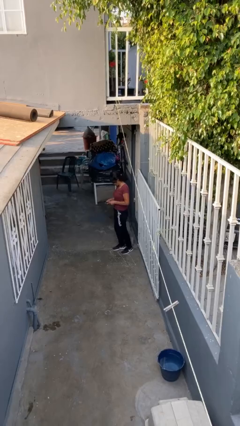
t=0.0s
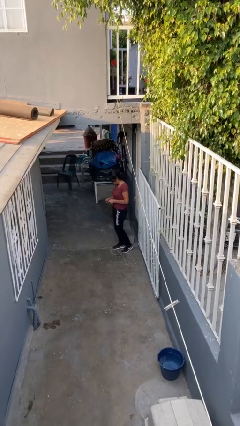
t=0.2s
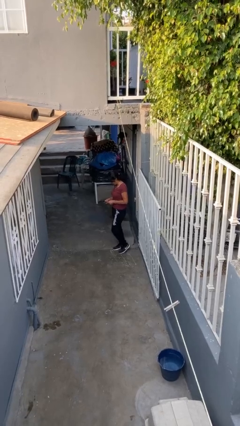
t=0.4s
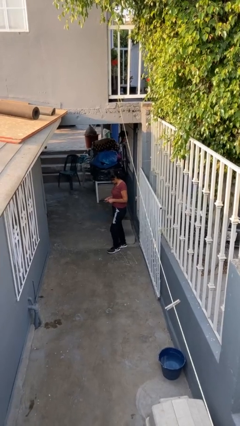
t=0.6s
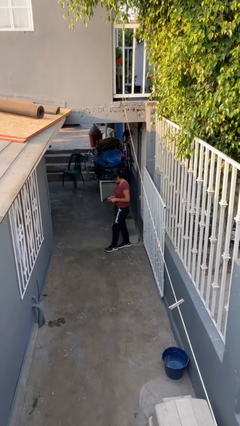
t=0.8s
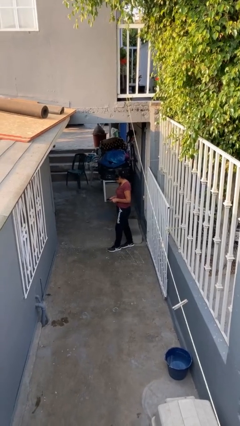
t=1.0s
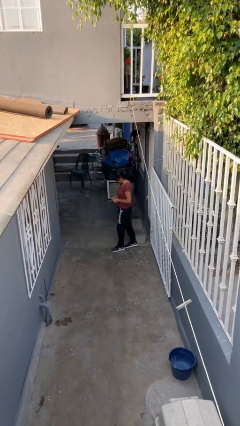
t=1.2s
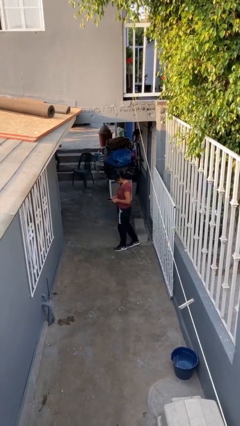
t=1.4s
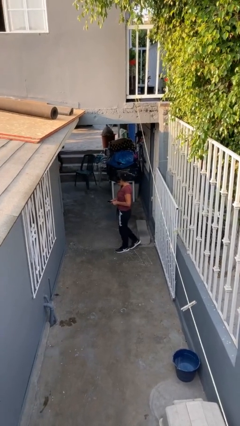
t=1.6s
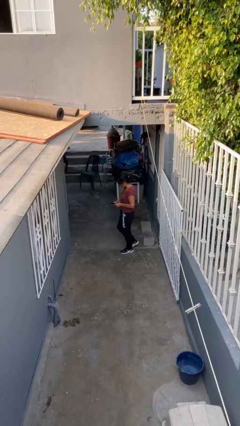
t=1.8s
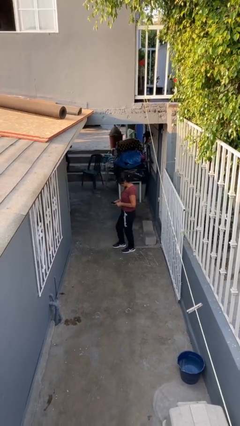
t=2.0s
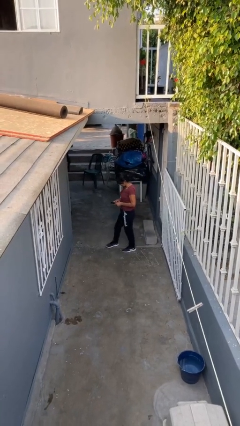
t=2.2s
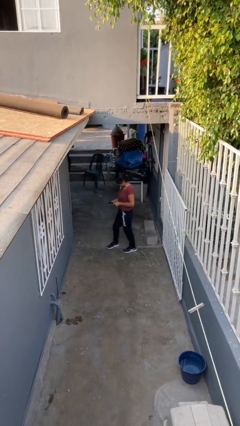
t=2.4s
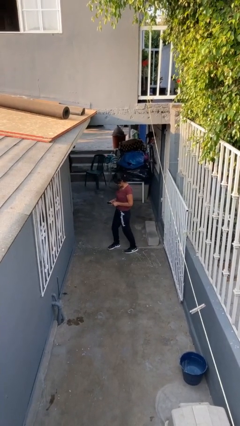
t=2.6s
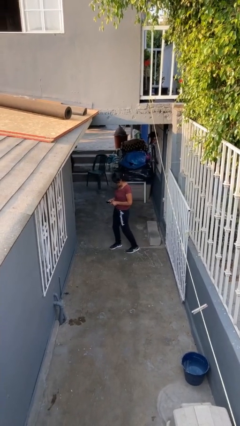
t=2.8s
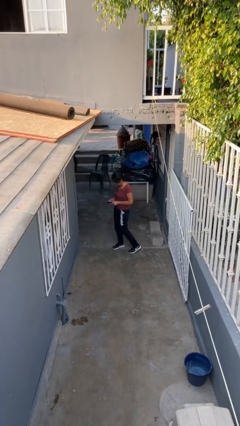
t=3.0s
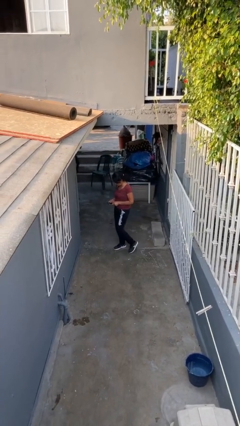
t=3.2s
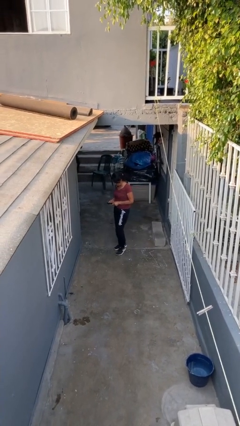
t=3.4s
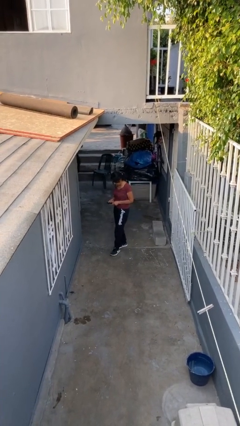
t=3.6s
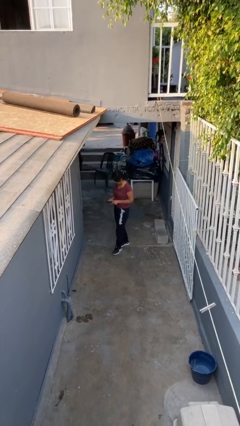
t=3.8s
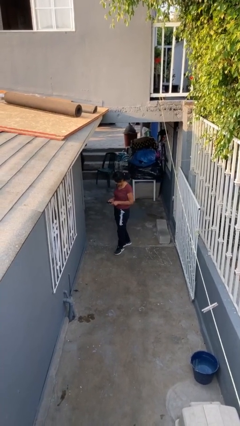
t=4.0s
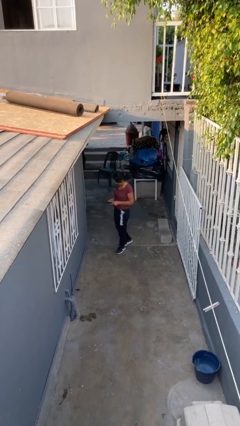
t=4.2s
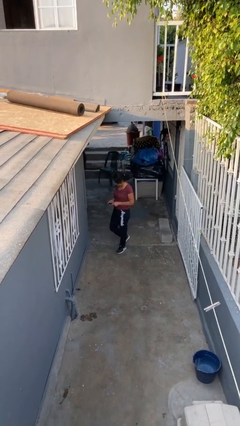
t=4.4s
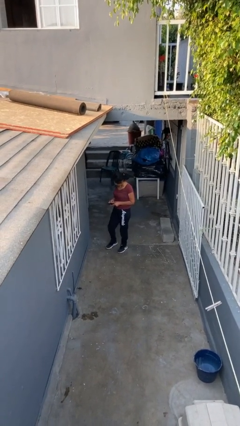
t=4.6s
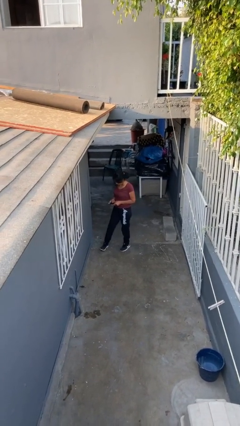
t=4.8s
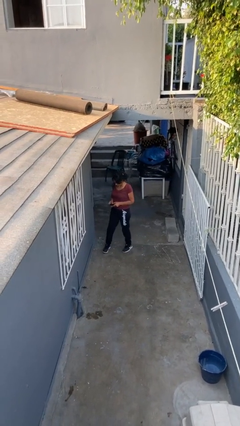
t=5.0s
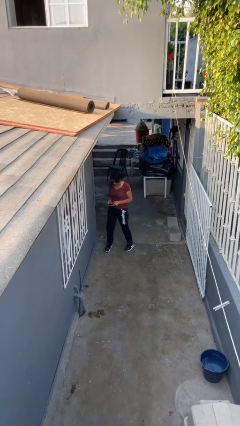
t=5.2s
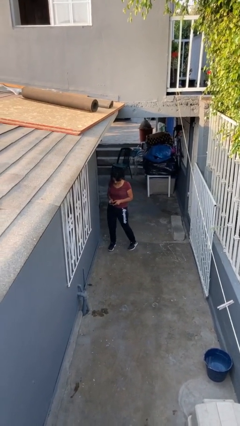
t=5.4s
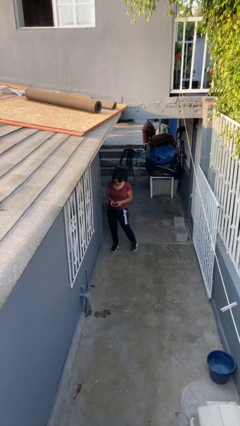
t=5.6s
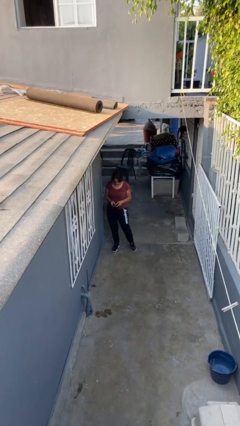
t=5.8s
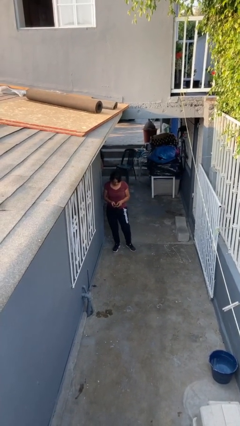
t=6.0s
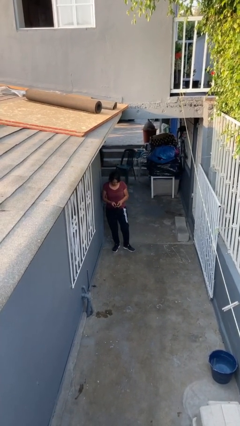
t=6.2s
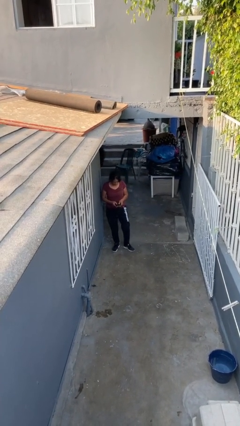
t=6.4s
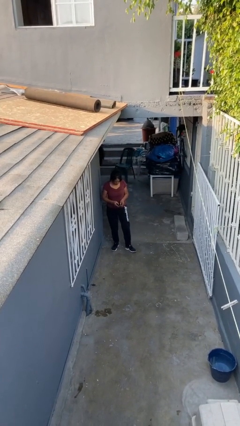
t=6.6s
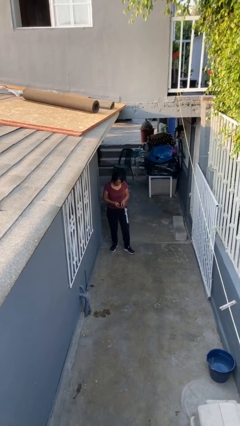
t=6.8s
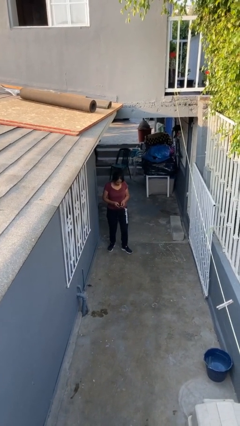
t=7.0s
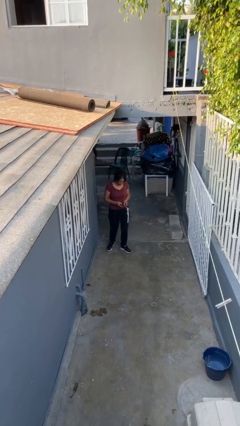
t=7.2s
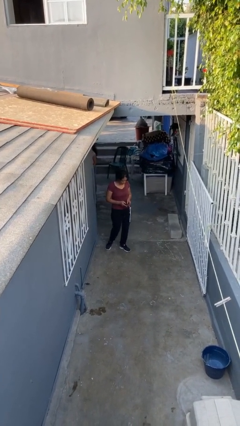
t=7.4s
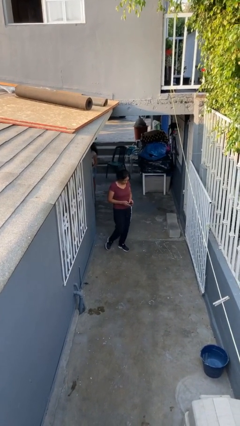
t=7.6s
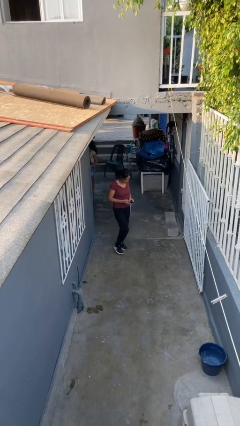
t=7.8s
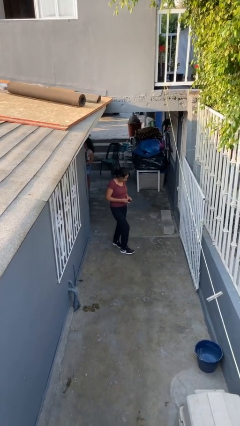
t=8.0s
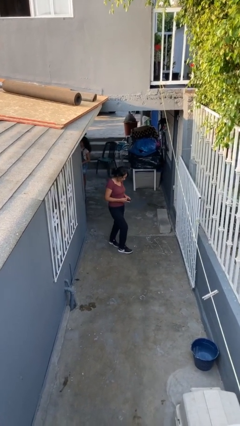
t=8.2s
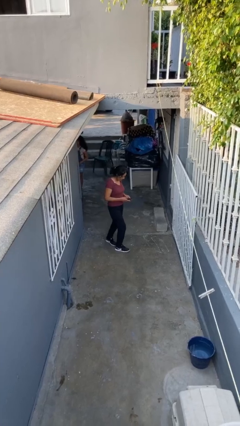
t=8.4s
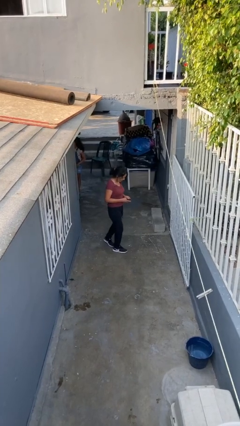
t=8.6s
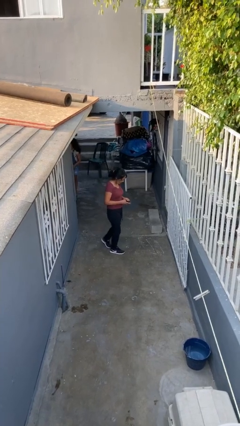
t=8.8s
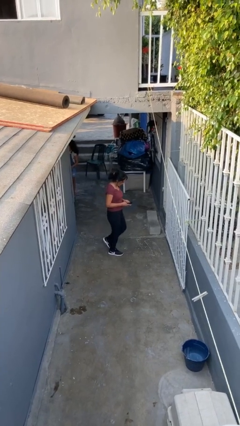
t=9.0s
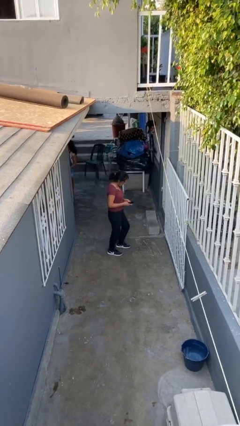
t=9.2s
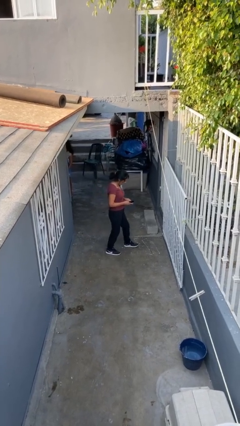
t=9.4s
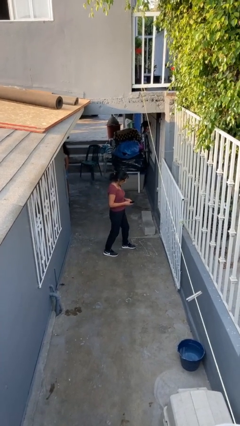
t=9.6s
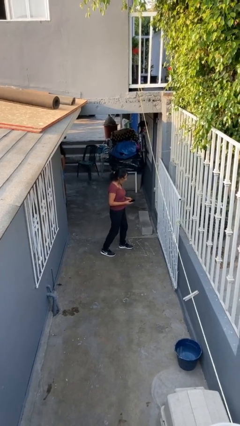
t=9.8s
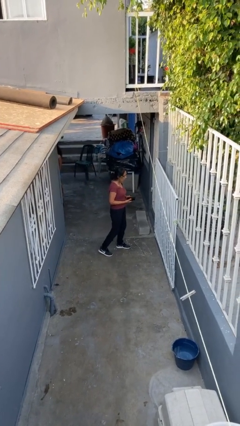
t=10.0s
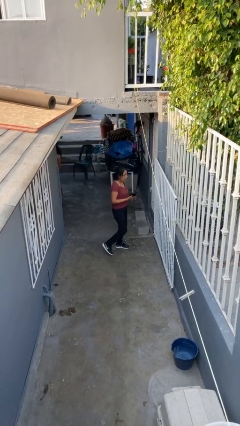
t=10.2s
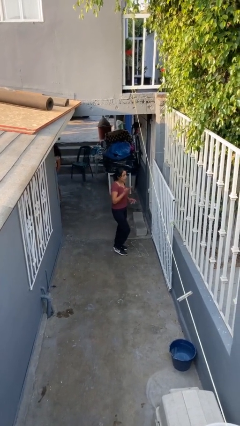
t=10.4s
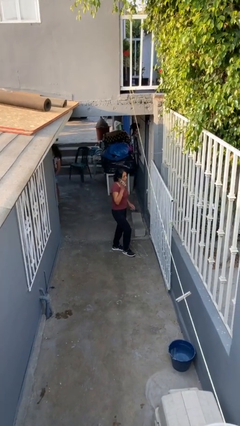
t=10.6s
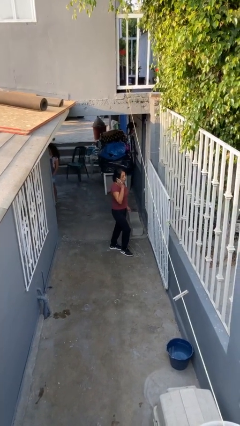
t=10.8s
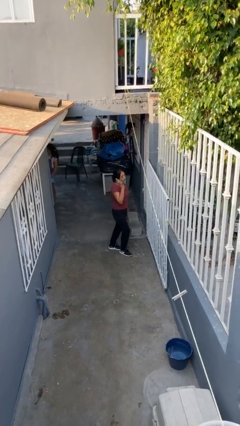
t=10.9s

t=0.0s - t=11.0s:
person texts on phone

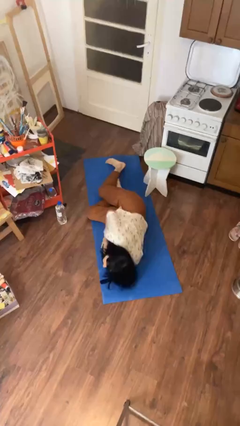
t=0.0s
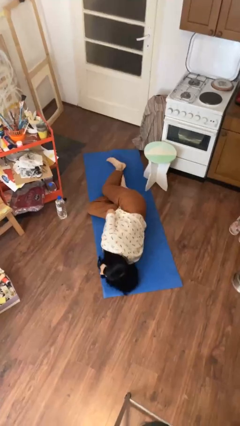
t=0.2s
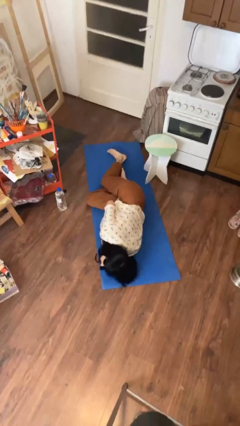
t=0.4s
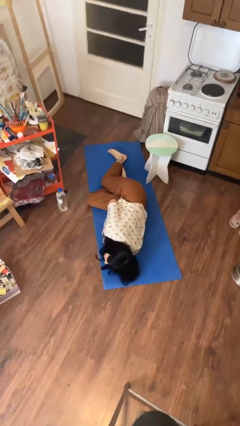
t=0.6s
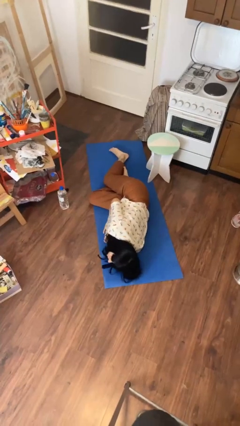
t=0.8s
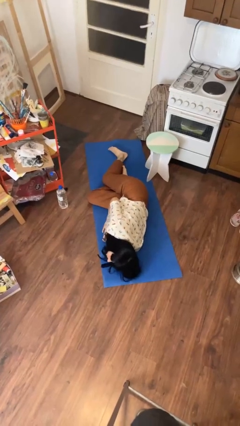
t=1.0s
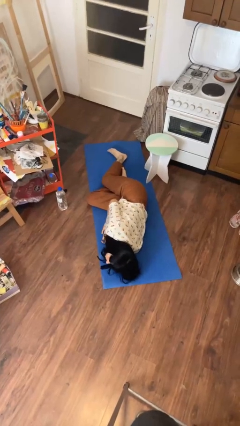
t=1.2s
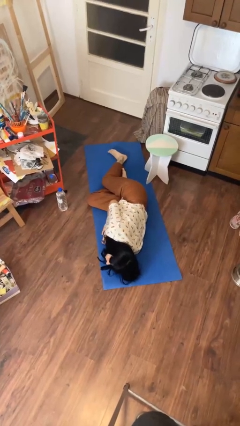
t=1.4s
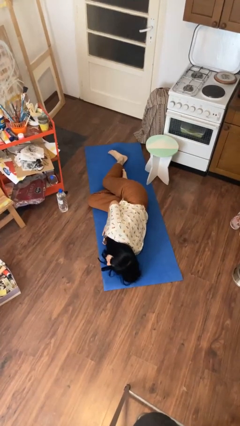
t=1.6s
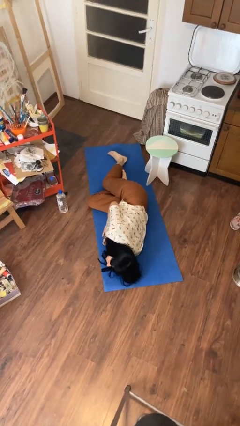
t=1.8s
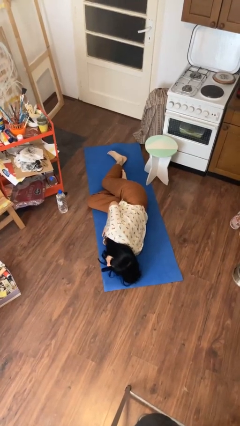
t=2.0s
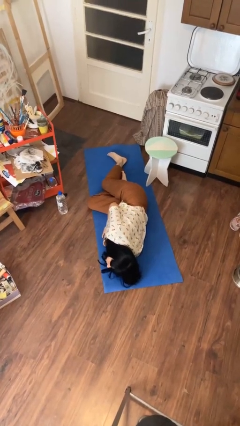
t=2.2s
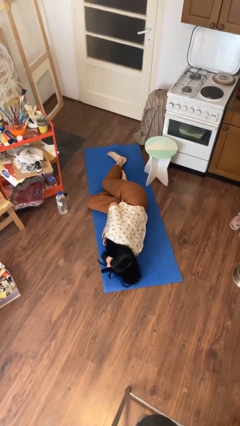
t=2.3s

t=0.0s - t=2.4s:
person lies down on floor

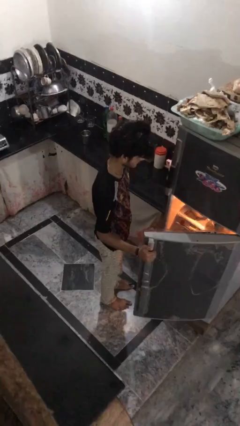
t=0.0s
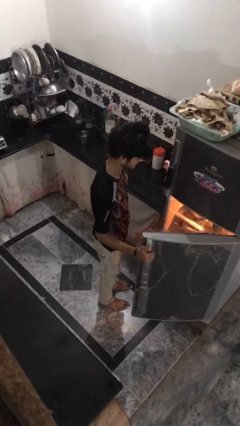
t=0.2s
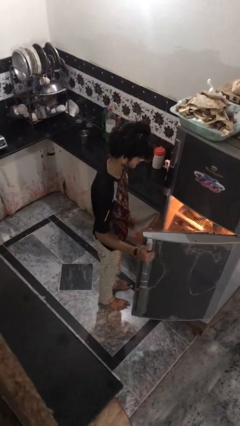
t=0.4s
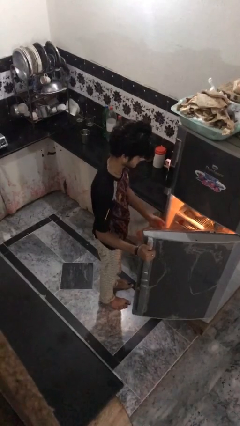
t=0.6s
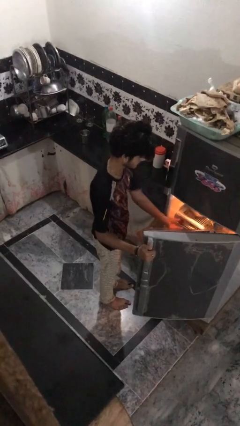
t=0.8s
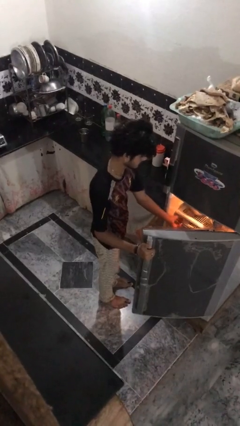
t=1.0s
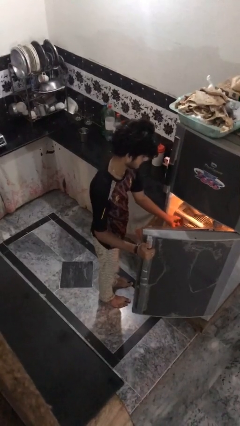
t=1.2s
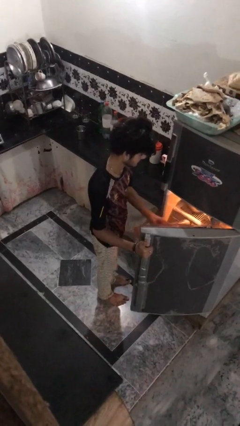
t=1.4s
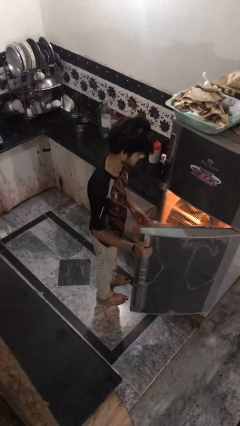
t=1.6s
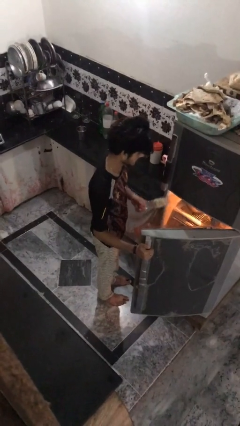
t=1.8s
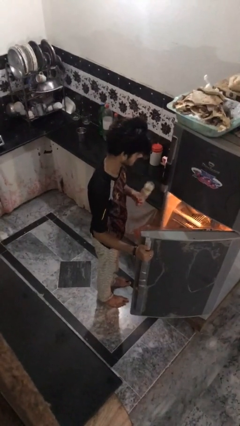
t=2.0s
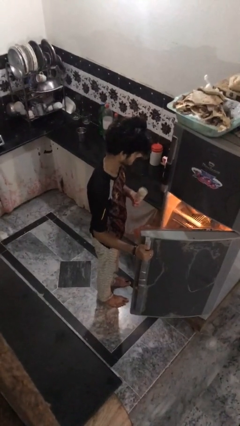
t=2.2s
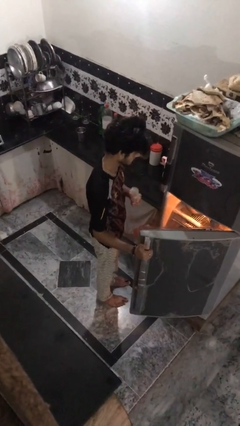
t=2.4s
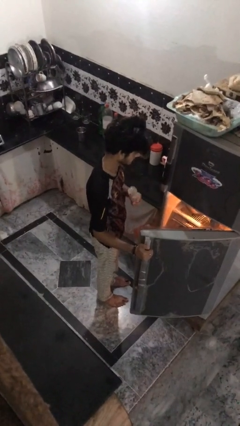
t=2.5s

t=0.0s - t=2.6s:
person takes object from refrigerator

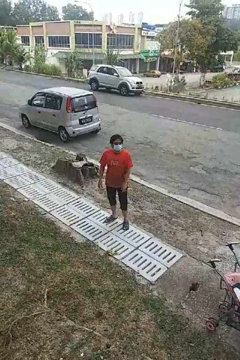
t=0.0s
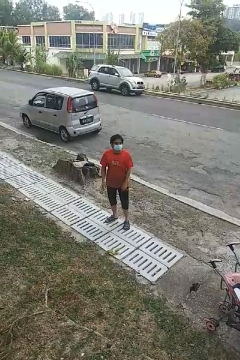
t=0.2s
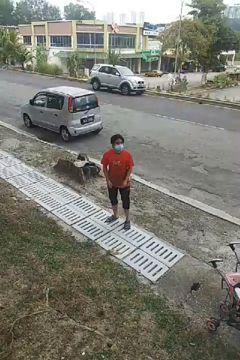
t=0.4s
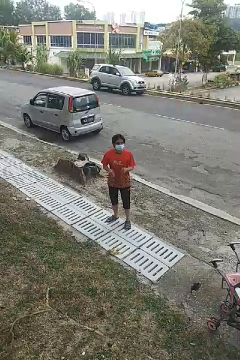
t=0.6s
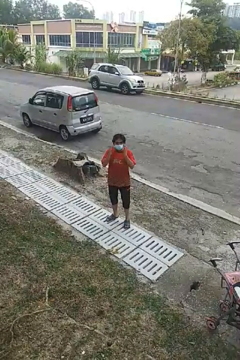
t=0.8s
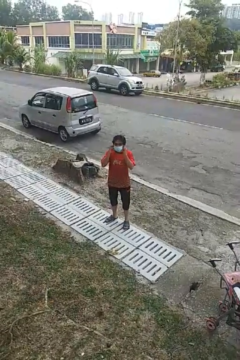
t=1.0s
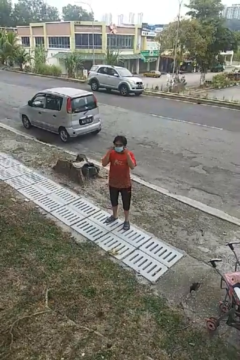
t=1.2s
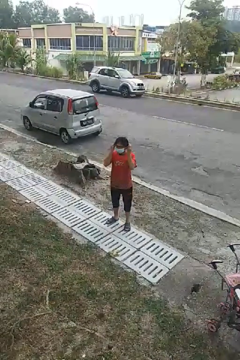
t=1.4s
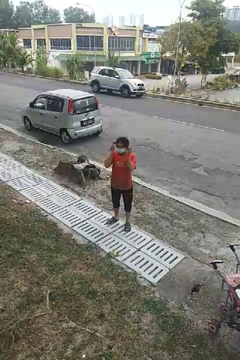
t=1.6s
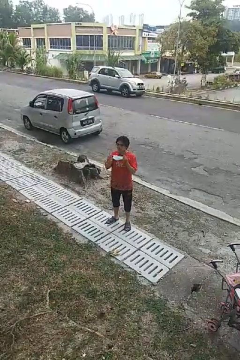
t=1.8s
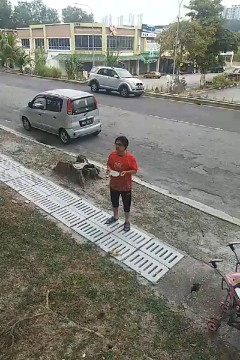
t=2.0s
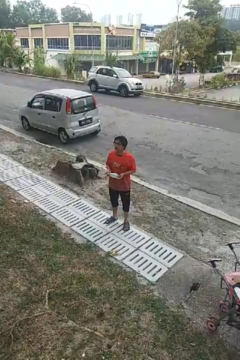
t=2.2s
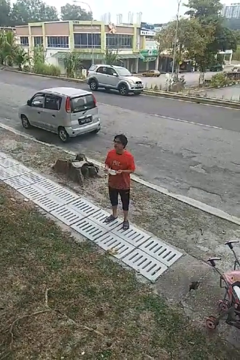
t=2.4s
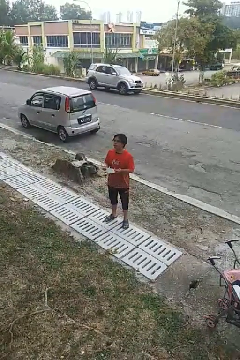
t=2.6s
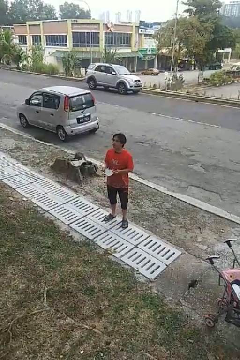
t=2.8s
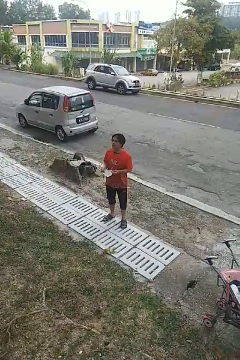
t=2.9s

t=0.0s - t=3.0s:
person takes off facemask
